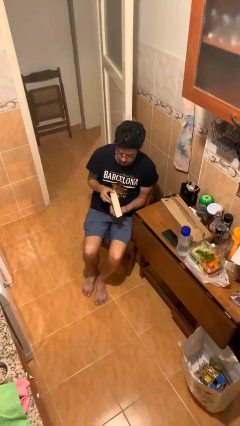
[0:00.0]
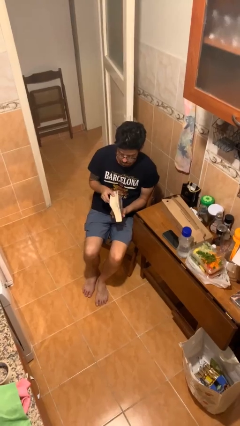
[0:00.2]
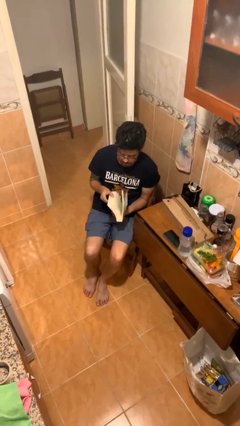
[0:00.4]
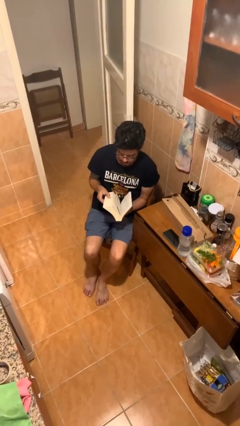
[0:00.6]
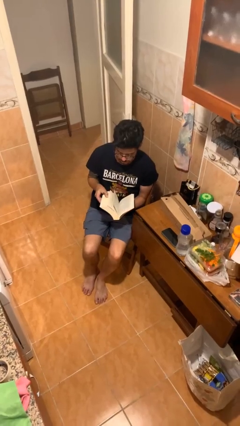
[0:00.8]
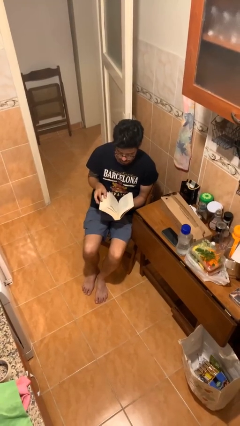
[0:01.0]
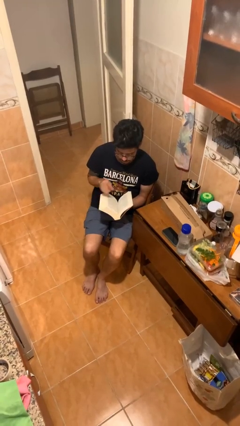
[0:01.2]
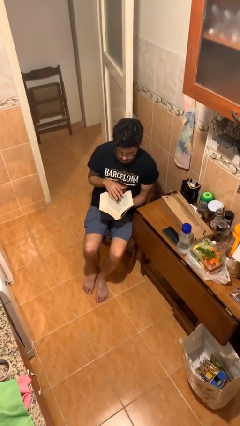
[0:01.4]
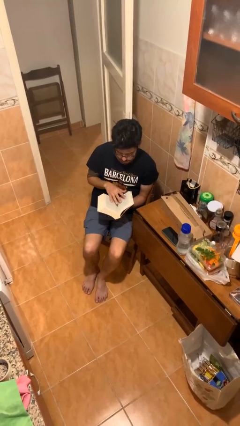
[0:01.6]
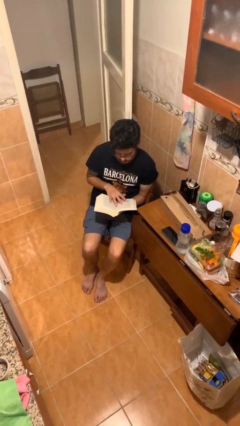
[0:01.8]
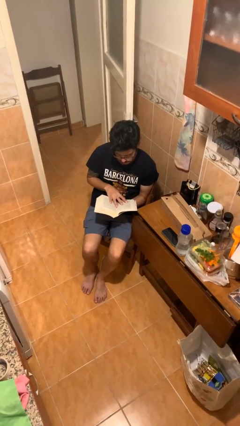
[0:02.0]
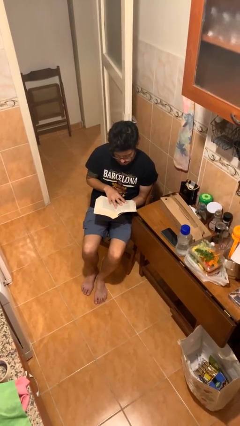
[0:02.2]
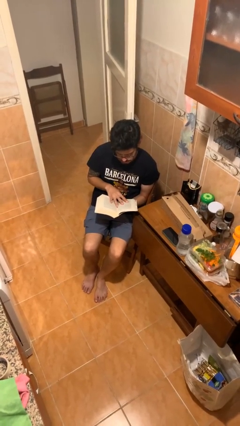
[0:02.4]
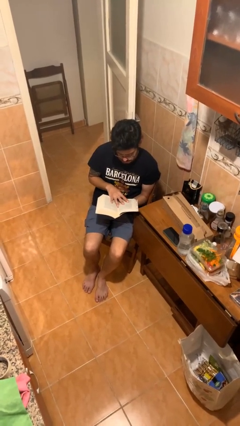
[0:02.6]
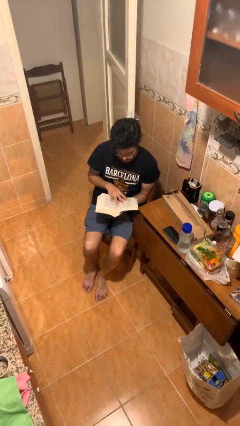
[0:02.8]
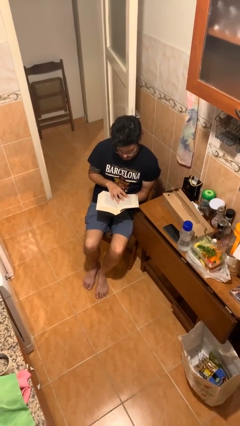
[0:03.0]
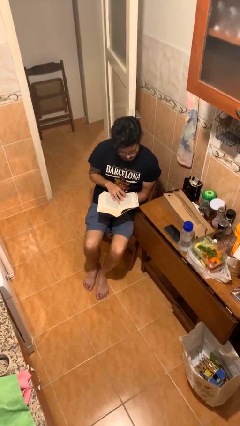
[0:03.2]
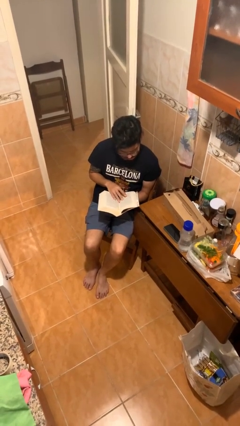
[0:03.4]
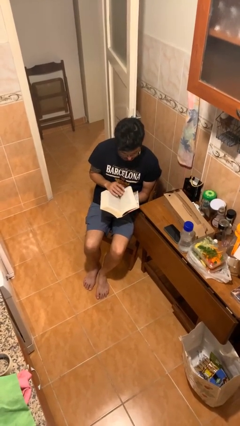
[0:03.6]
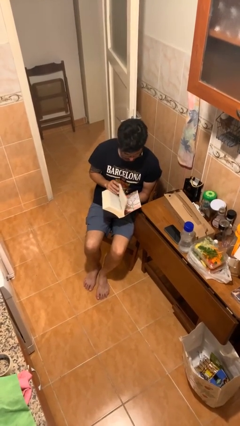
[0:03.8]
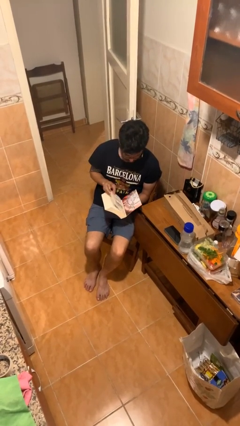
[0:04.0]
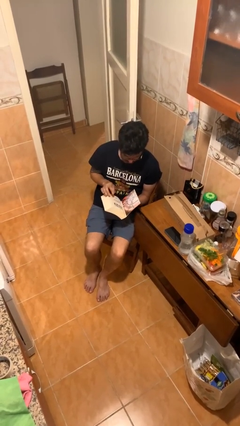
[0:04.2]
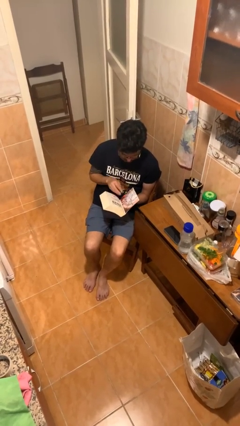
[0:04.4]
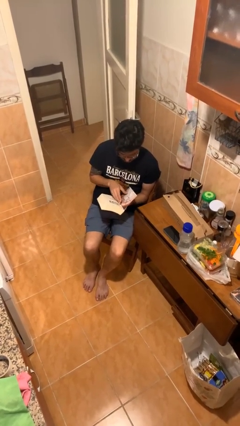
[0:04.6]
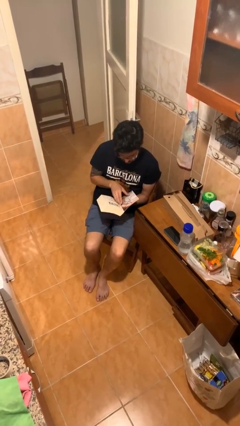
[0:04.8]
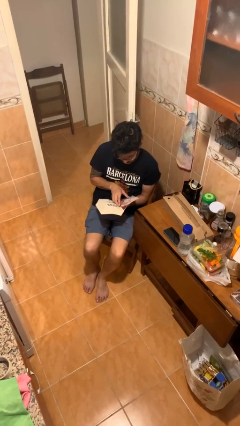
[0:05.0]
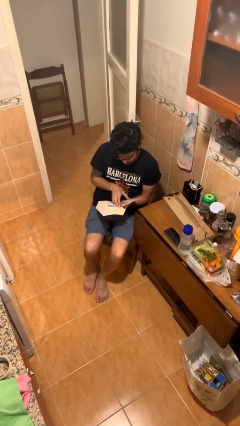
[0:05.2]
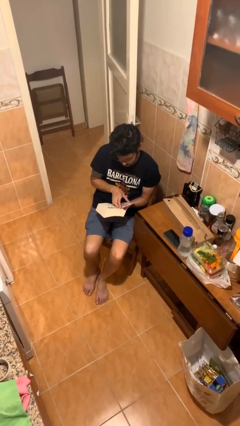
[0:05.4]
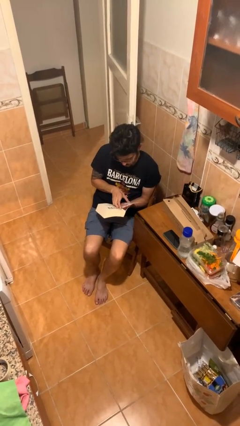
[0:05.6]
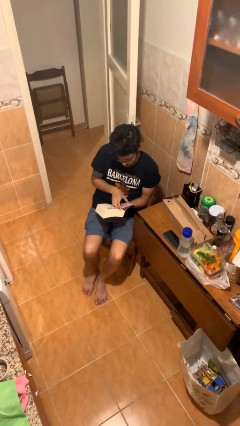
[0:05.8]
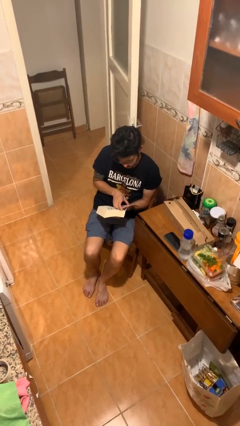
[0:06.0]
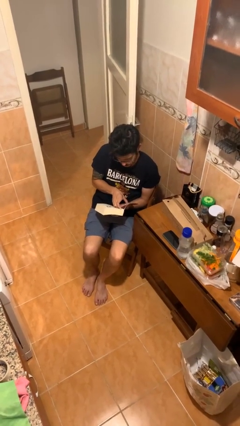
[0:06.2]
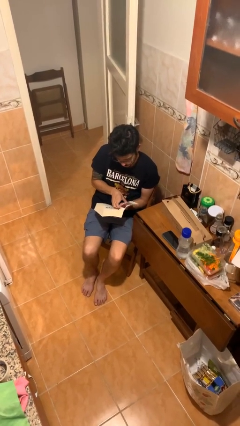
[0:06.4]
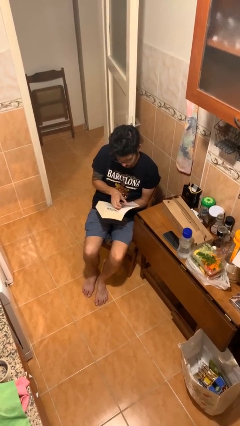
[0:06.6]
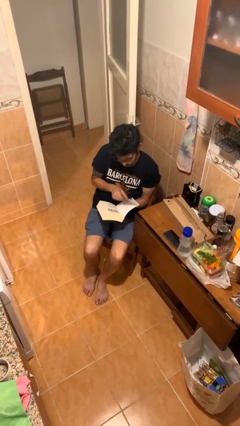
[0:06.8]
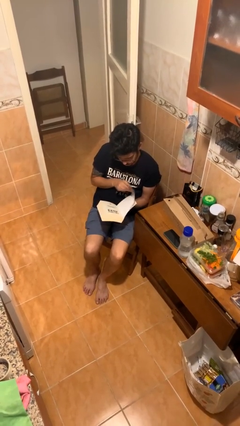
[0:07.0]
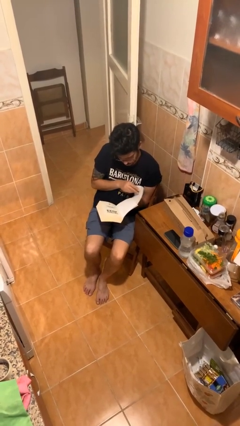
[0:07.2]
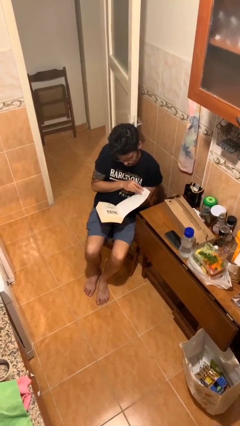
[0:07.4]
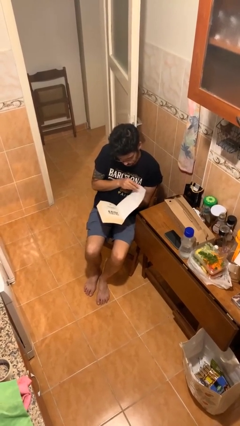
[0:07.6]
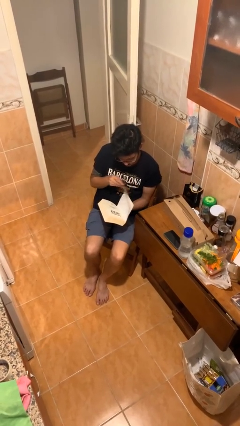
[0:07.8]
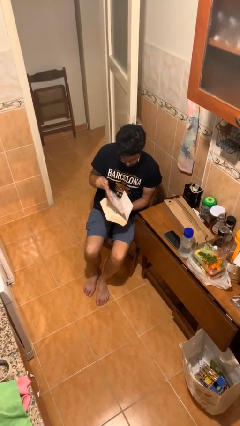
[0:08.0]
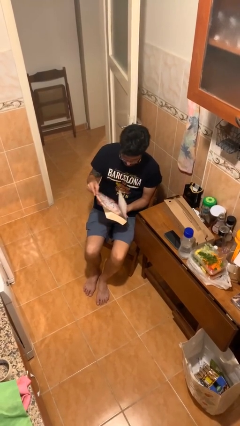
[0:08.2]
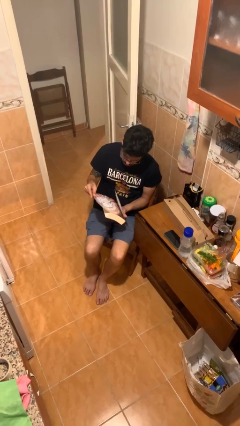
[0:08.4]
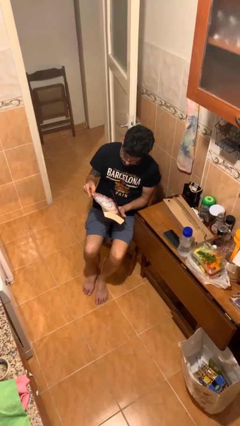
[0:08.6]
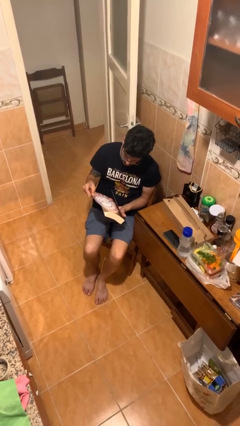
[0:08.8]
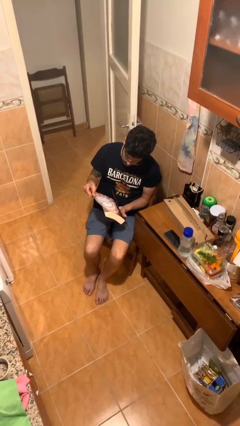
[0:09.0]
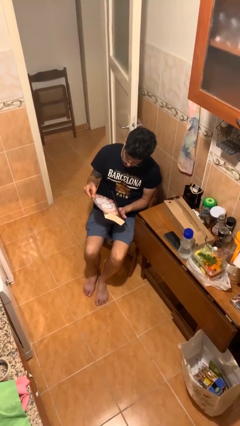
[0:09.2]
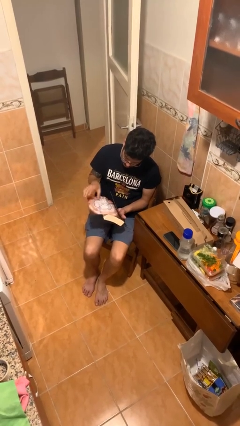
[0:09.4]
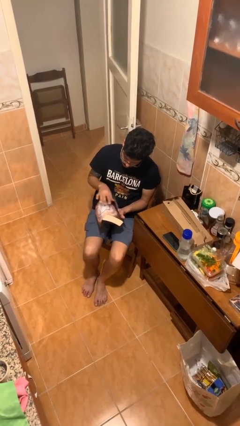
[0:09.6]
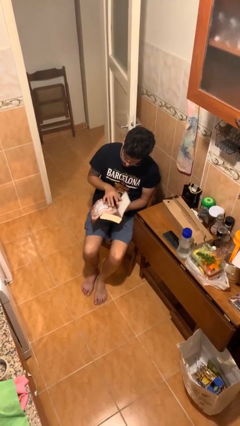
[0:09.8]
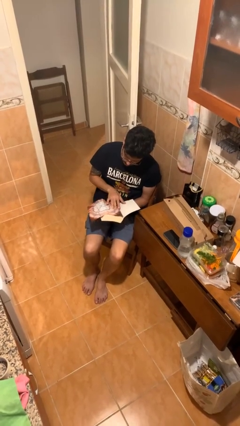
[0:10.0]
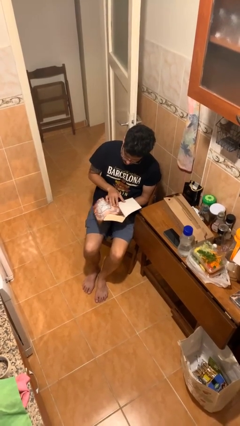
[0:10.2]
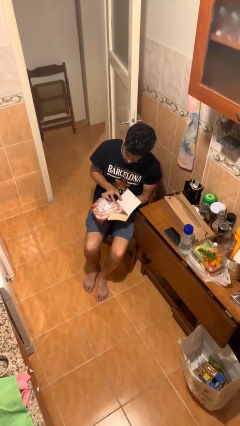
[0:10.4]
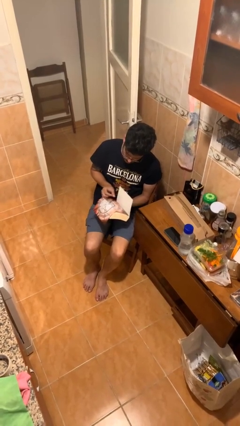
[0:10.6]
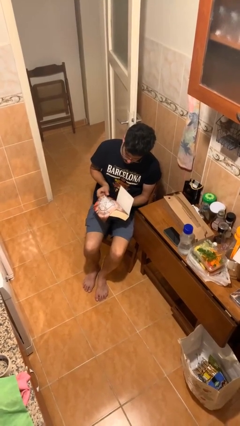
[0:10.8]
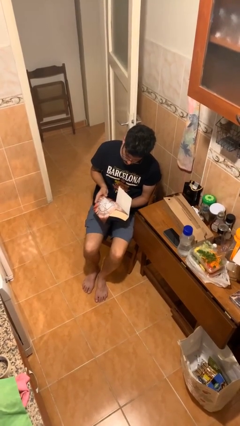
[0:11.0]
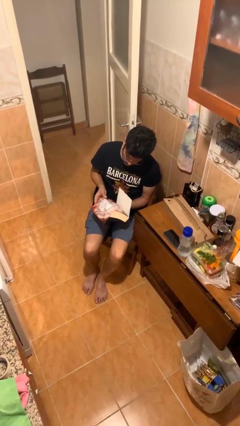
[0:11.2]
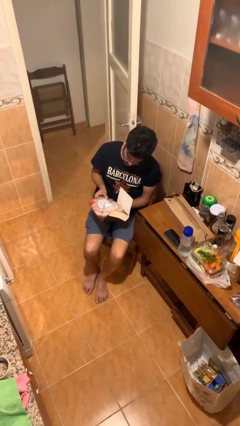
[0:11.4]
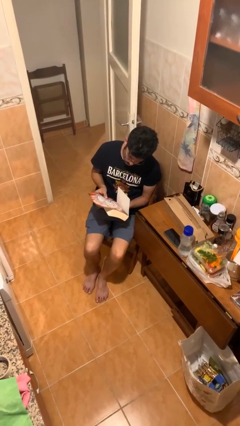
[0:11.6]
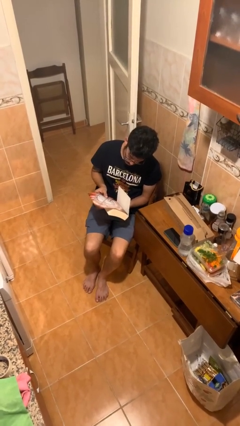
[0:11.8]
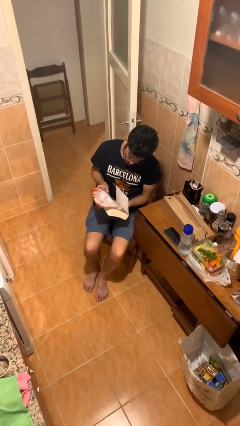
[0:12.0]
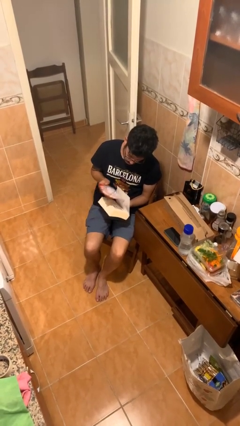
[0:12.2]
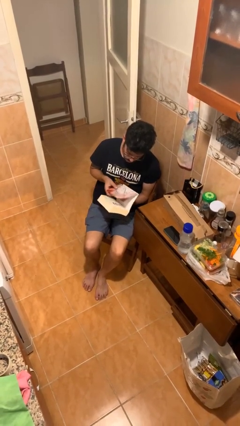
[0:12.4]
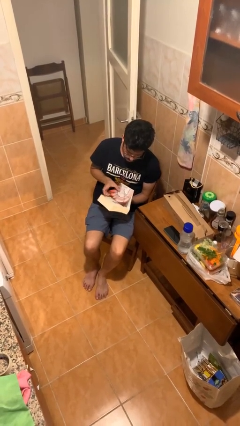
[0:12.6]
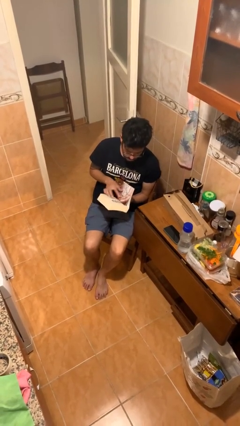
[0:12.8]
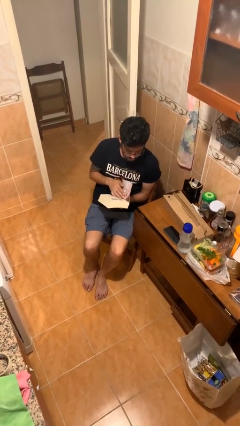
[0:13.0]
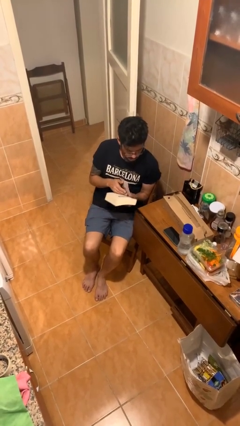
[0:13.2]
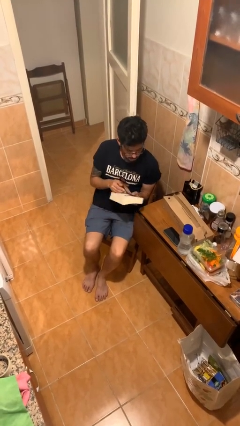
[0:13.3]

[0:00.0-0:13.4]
person reads document

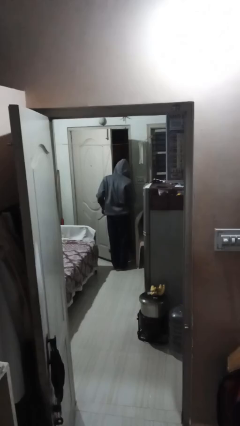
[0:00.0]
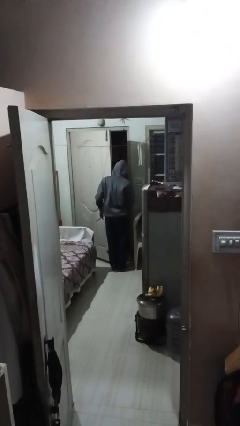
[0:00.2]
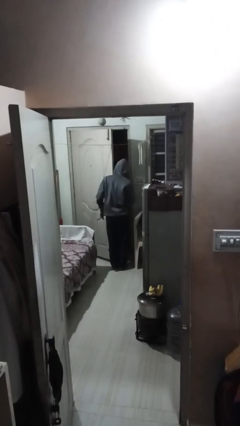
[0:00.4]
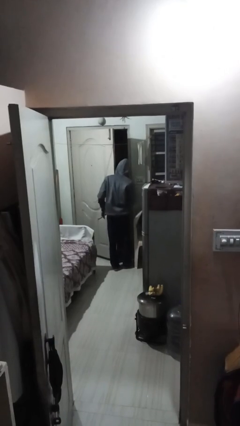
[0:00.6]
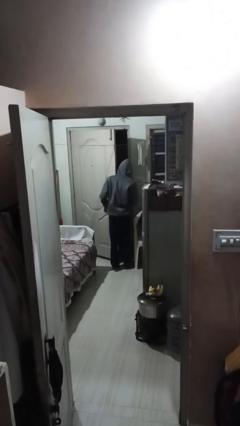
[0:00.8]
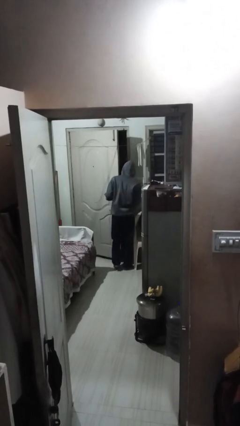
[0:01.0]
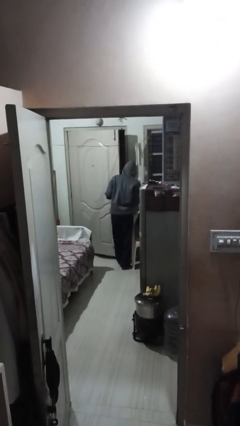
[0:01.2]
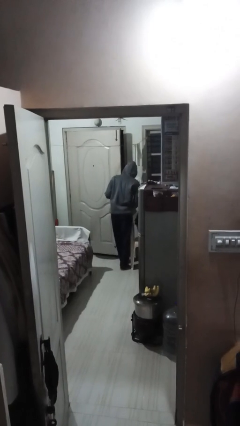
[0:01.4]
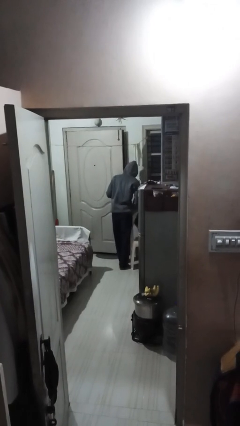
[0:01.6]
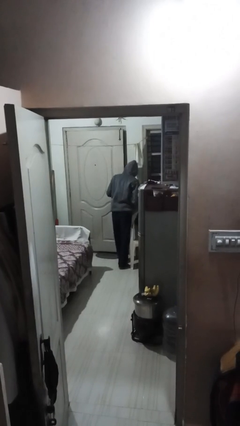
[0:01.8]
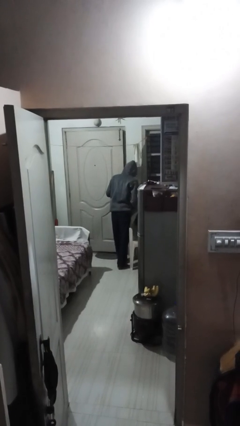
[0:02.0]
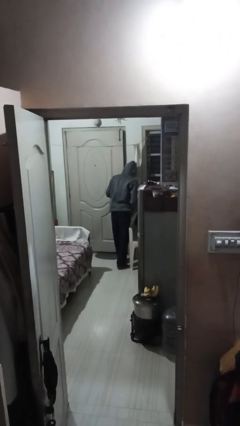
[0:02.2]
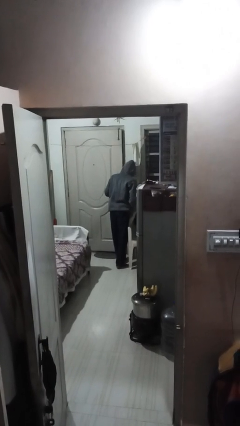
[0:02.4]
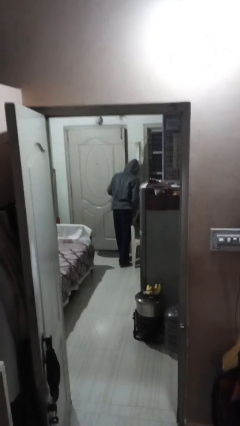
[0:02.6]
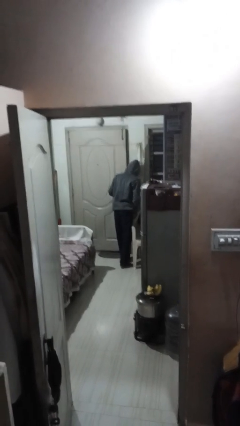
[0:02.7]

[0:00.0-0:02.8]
person closes facility door

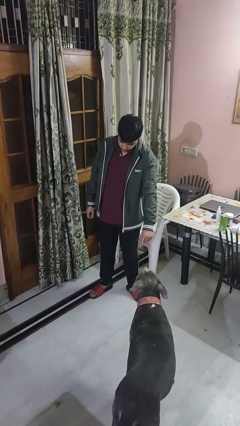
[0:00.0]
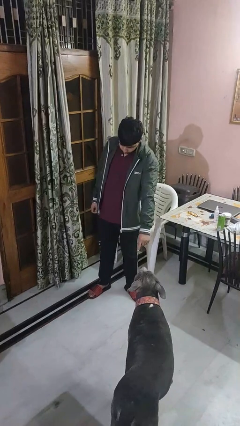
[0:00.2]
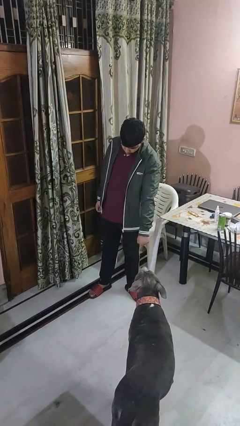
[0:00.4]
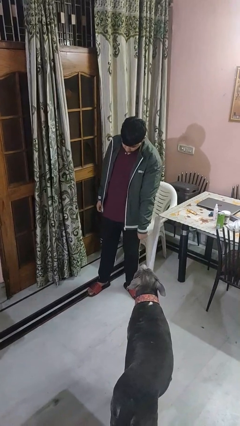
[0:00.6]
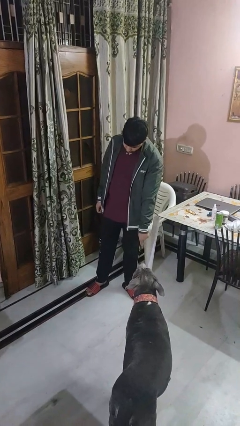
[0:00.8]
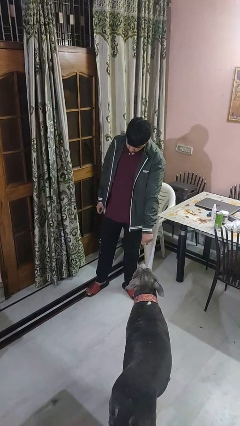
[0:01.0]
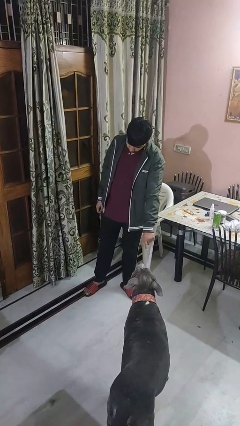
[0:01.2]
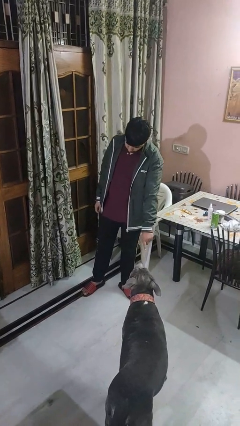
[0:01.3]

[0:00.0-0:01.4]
person points to dog

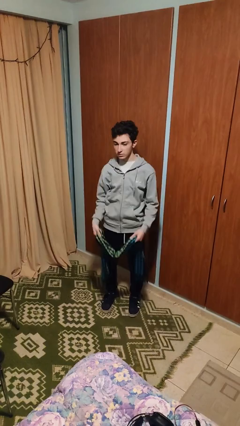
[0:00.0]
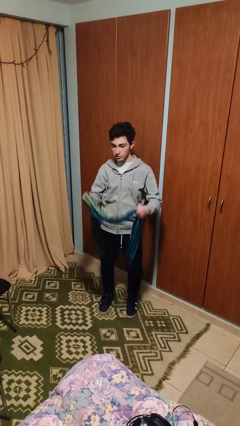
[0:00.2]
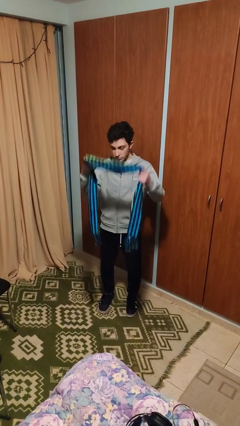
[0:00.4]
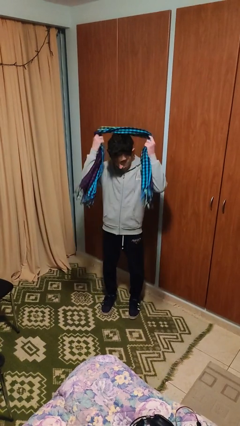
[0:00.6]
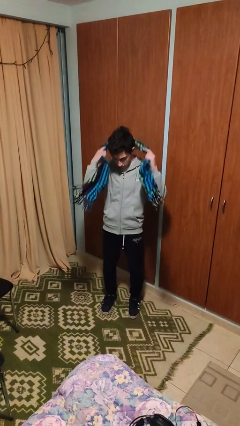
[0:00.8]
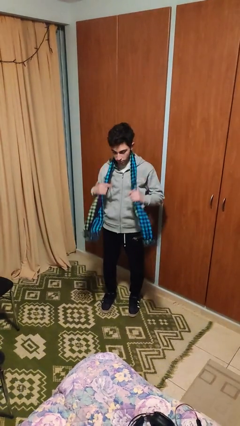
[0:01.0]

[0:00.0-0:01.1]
person puts on scarf
